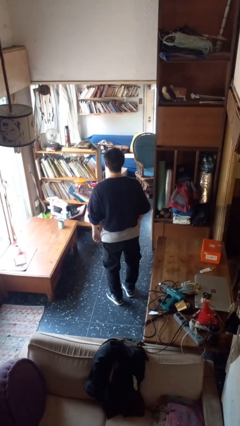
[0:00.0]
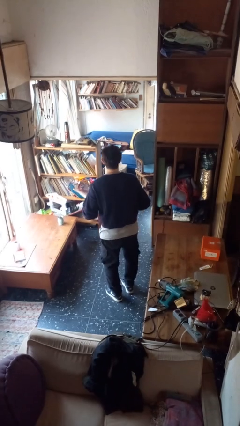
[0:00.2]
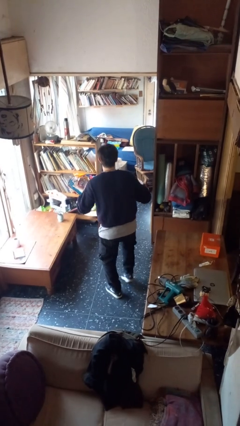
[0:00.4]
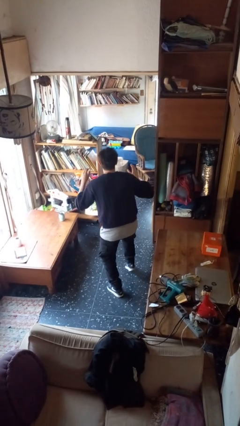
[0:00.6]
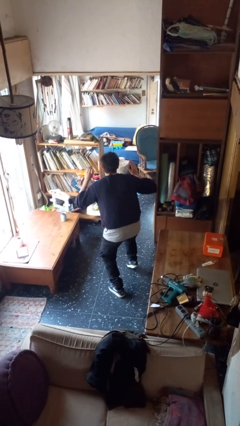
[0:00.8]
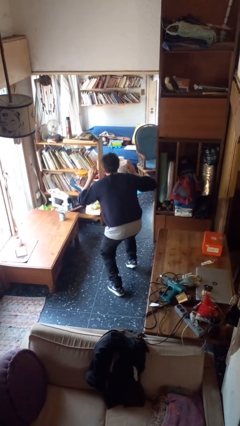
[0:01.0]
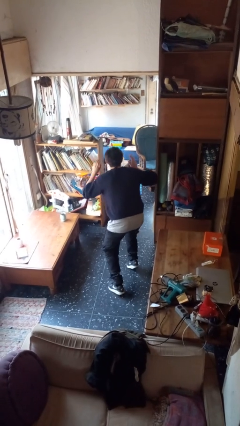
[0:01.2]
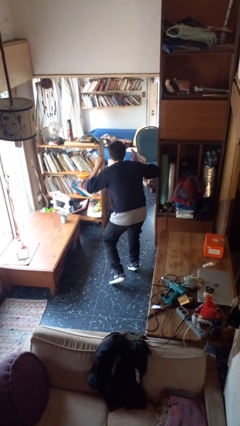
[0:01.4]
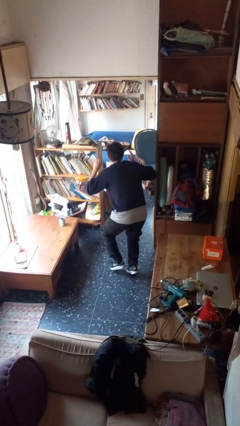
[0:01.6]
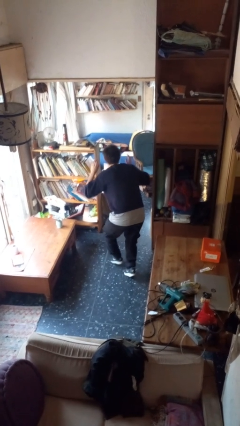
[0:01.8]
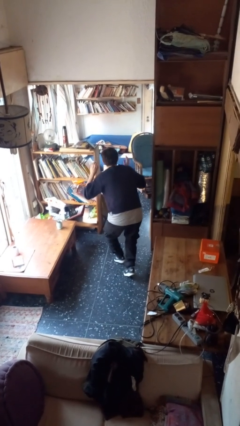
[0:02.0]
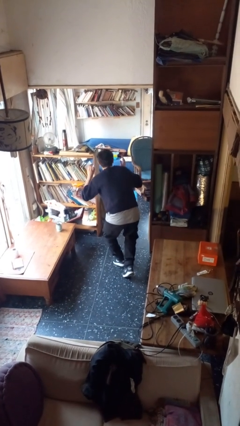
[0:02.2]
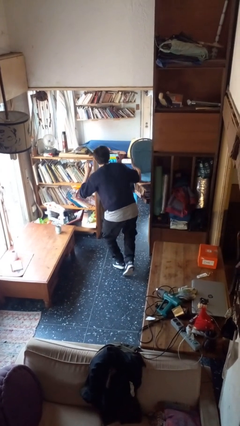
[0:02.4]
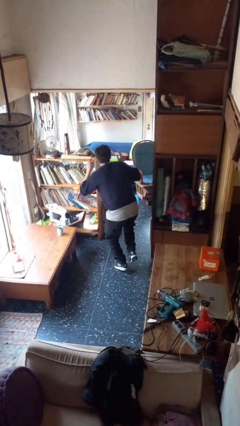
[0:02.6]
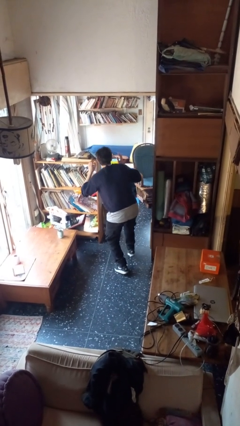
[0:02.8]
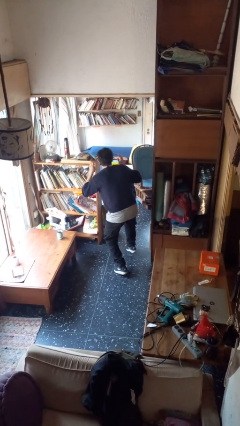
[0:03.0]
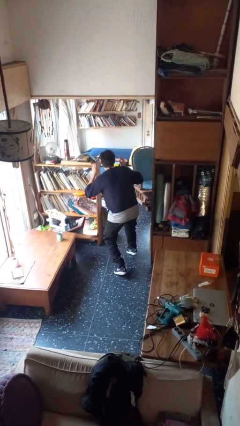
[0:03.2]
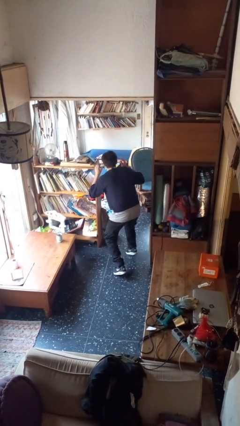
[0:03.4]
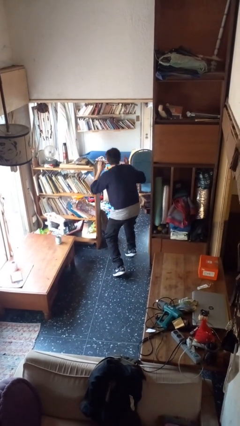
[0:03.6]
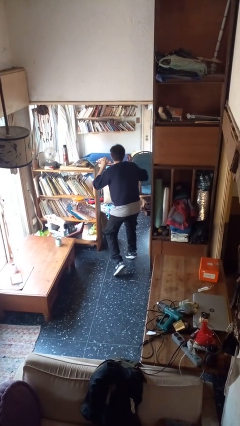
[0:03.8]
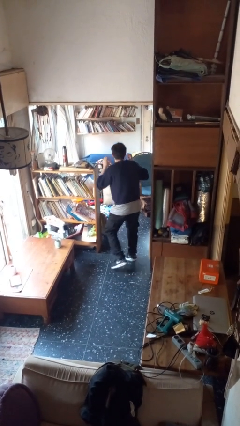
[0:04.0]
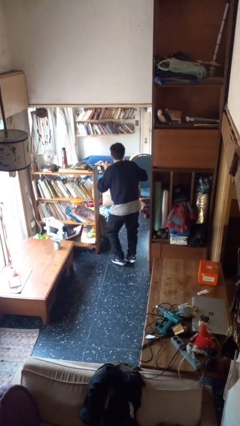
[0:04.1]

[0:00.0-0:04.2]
person walks tiptoe

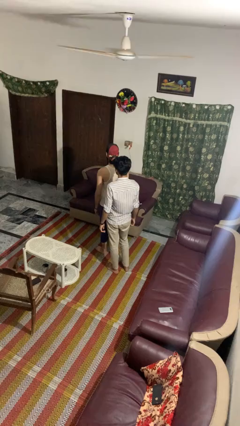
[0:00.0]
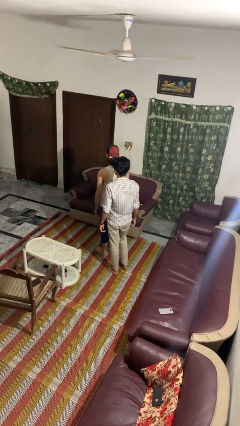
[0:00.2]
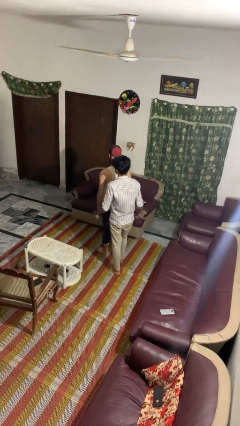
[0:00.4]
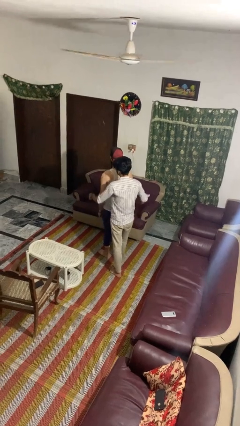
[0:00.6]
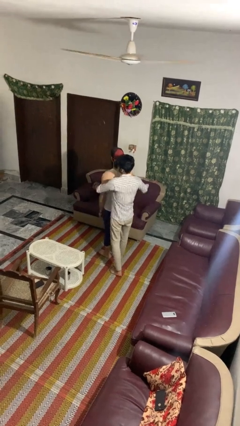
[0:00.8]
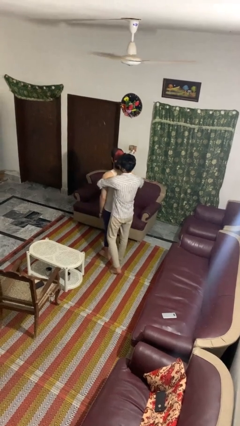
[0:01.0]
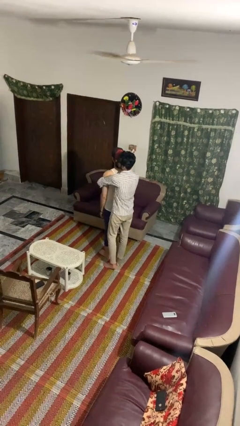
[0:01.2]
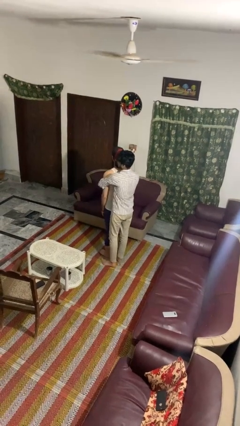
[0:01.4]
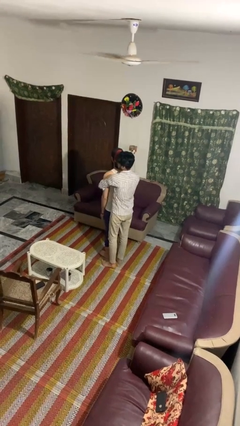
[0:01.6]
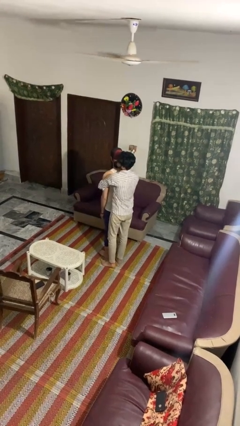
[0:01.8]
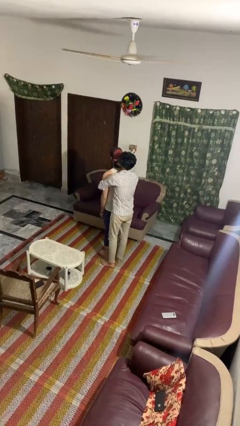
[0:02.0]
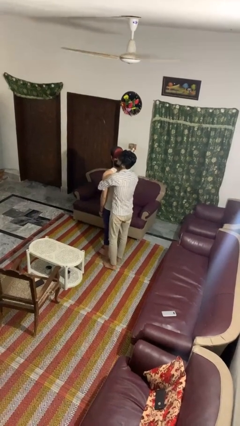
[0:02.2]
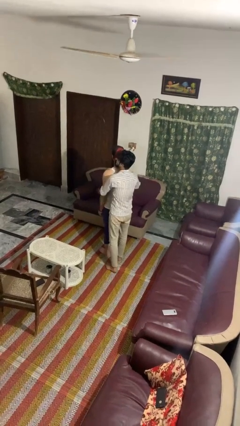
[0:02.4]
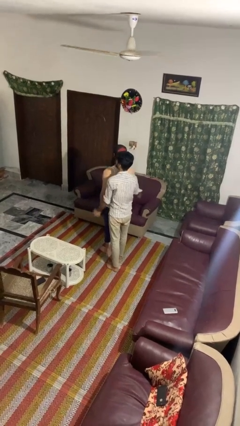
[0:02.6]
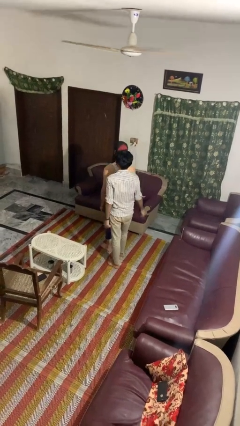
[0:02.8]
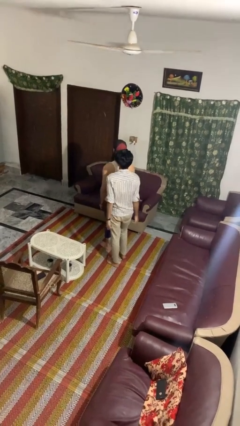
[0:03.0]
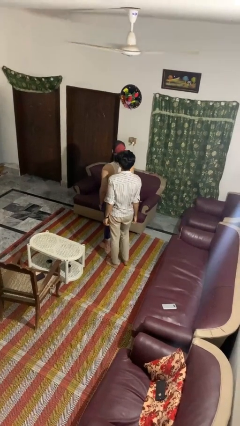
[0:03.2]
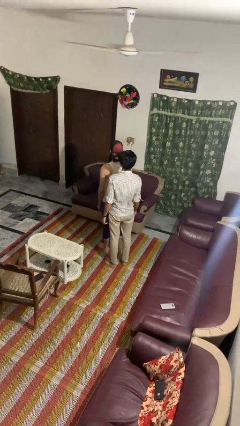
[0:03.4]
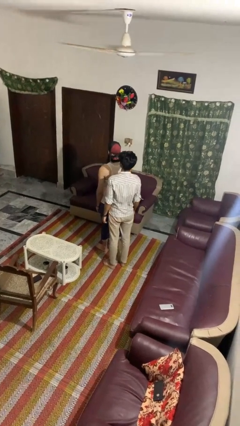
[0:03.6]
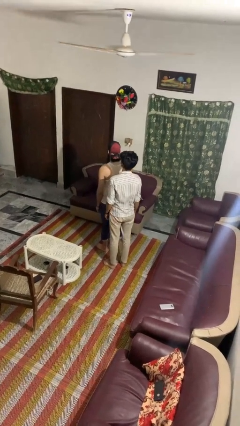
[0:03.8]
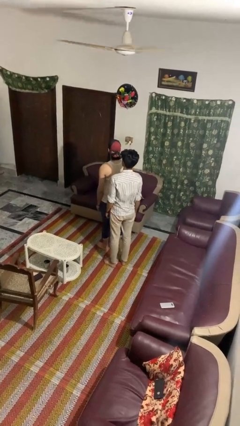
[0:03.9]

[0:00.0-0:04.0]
person hugs person from behind

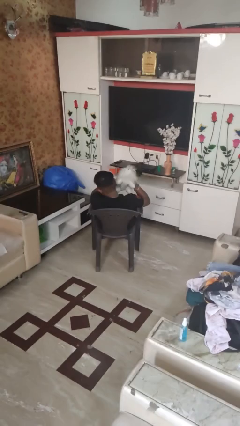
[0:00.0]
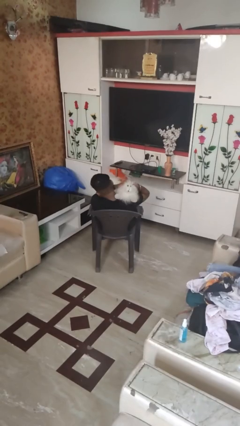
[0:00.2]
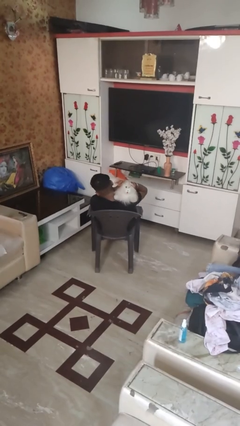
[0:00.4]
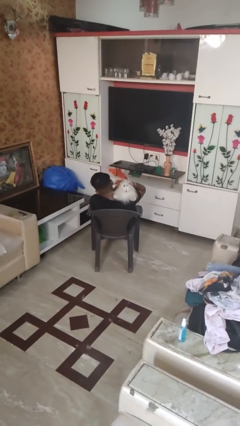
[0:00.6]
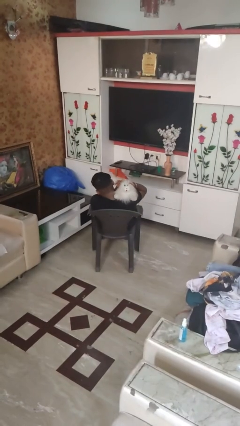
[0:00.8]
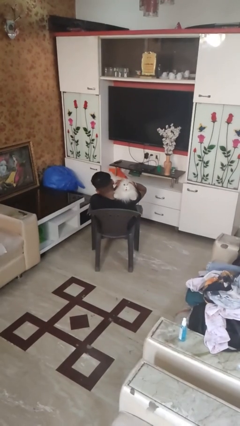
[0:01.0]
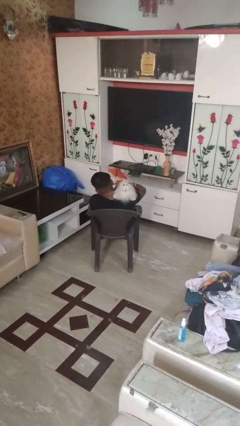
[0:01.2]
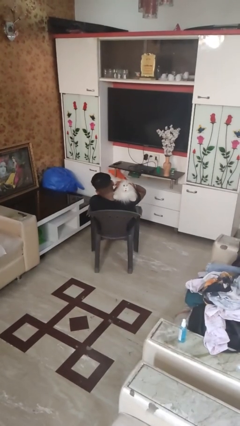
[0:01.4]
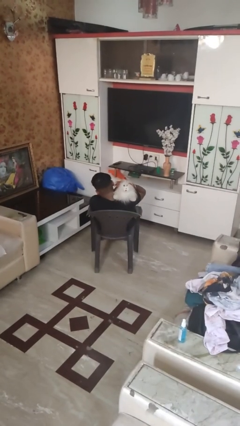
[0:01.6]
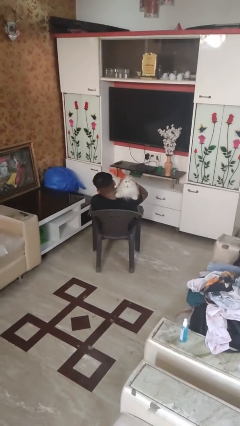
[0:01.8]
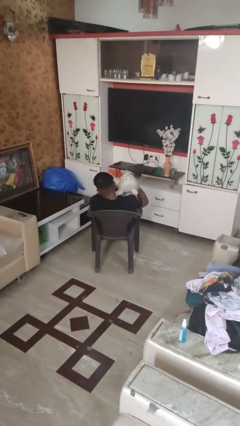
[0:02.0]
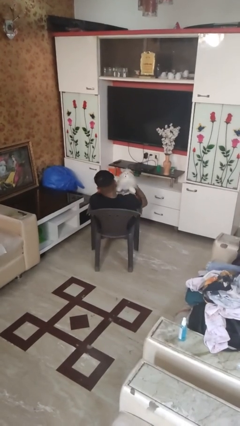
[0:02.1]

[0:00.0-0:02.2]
person hugs stuffed animal

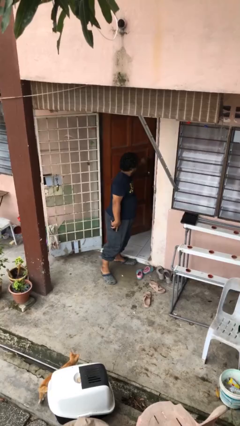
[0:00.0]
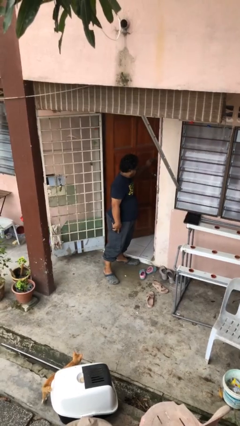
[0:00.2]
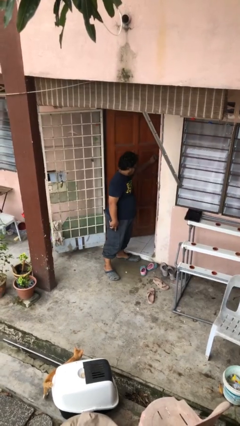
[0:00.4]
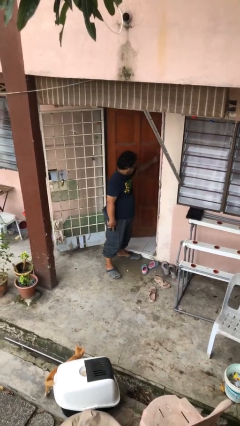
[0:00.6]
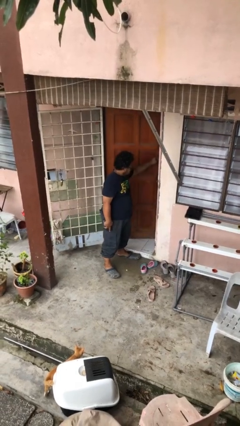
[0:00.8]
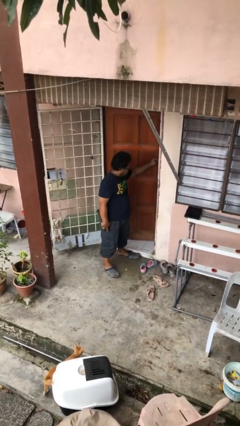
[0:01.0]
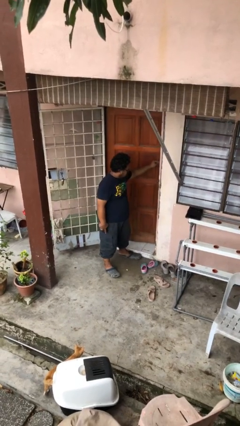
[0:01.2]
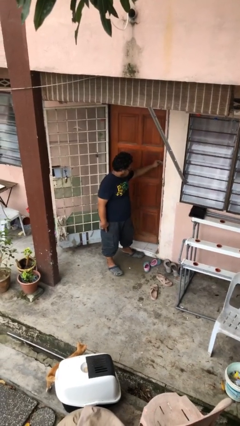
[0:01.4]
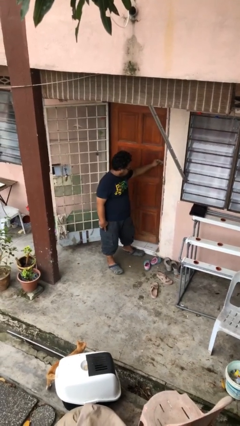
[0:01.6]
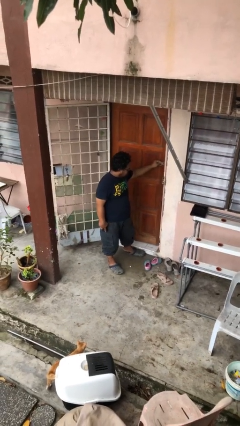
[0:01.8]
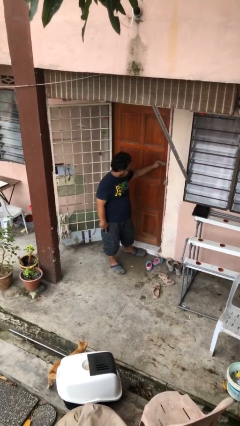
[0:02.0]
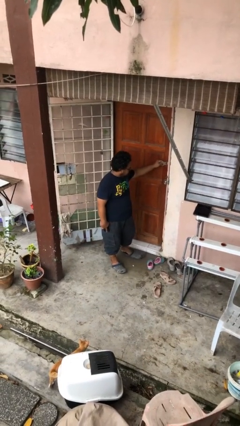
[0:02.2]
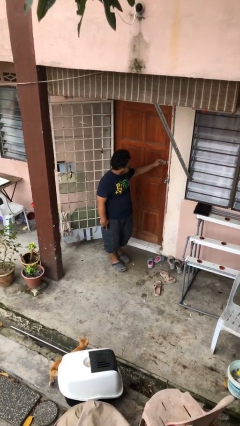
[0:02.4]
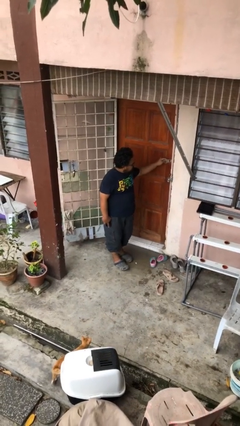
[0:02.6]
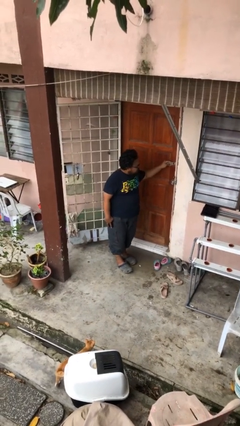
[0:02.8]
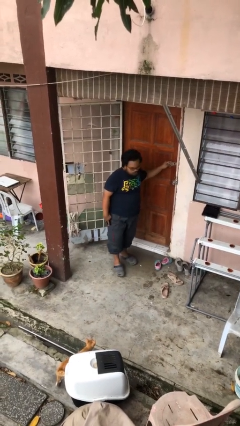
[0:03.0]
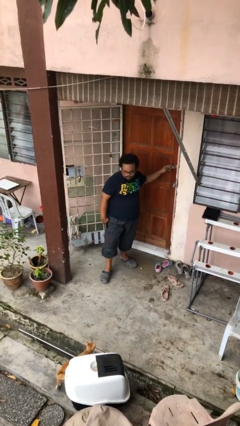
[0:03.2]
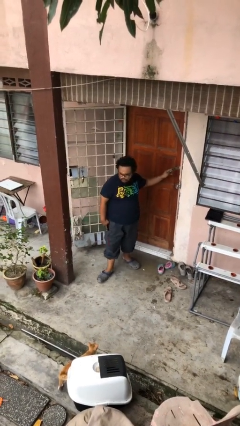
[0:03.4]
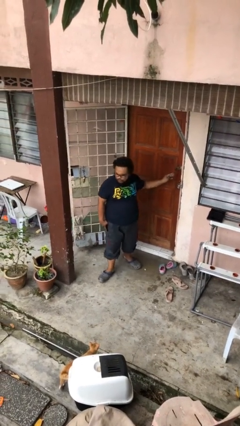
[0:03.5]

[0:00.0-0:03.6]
person closes facility door

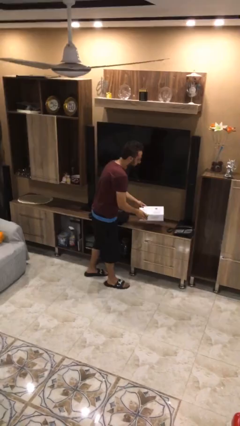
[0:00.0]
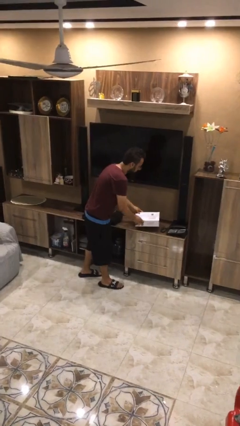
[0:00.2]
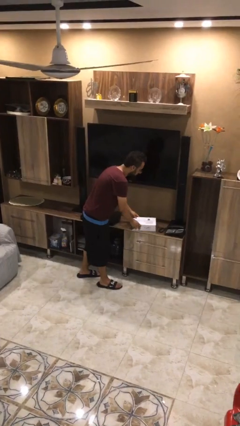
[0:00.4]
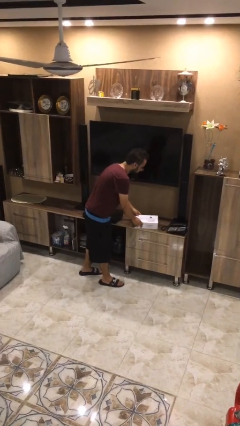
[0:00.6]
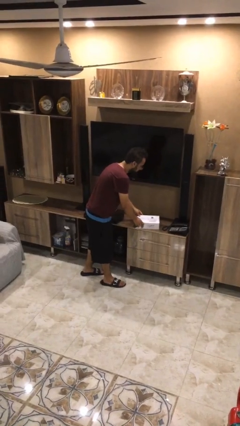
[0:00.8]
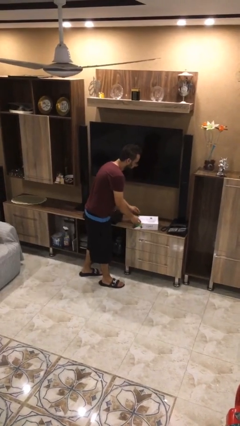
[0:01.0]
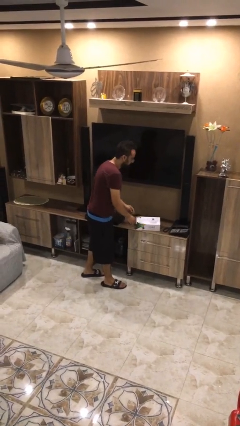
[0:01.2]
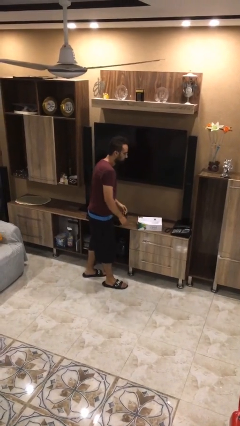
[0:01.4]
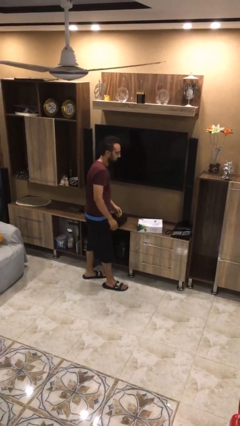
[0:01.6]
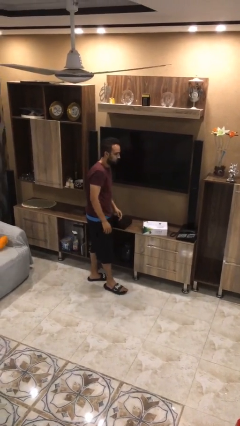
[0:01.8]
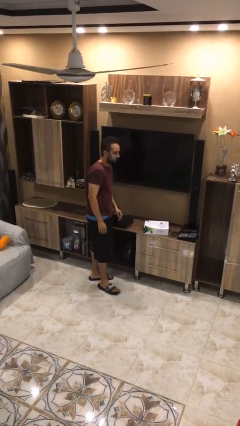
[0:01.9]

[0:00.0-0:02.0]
person puts down object on table

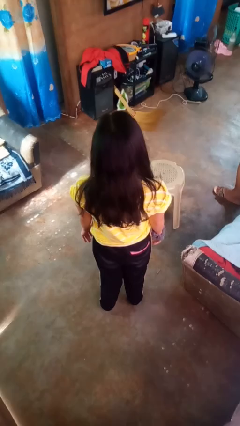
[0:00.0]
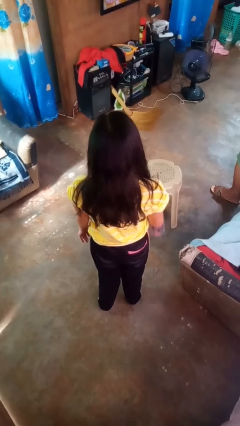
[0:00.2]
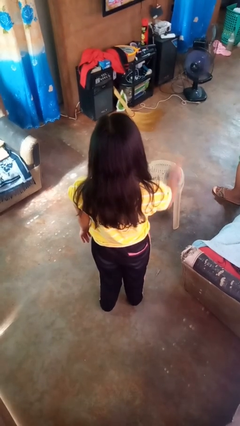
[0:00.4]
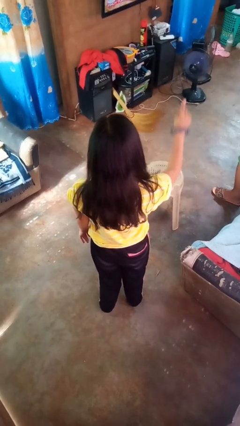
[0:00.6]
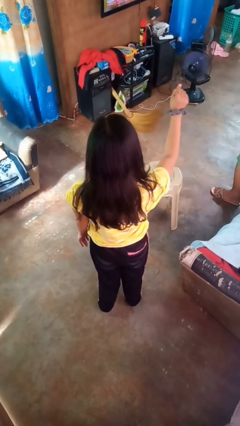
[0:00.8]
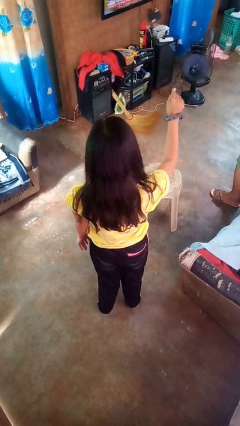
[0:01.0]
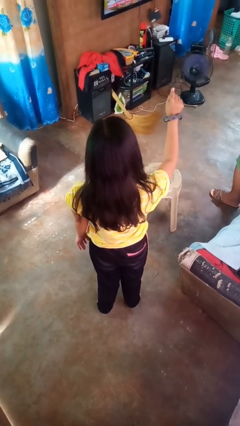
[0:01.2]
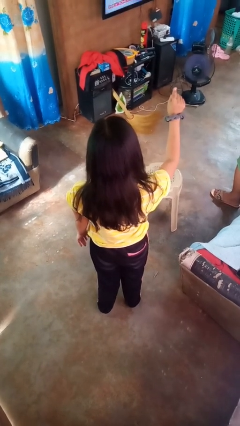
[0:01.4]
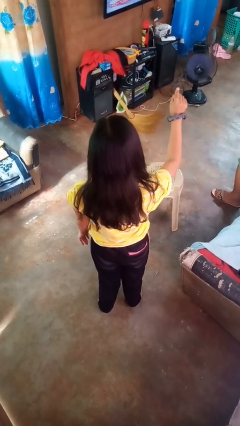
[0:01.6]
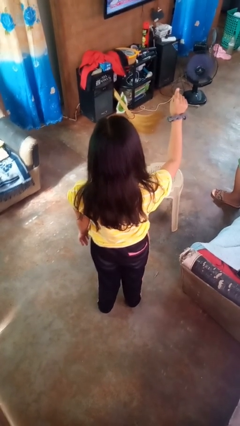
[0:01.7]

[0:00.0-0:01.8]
person gestures number one
